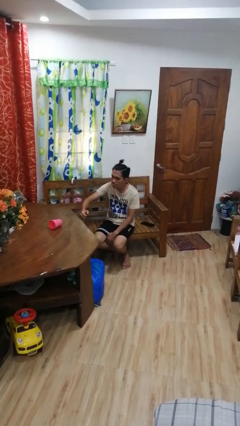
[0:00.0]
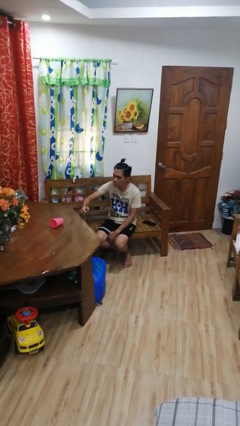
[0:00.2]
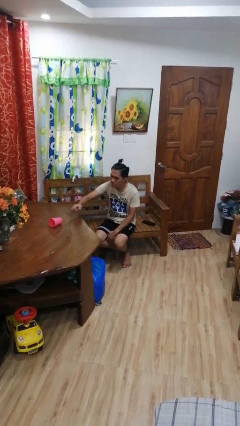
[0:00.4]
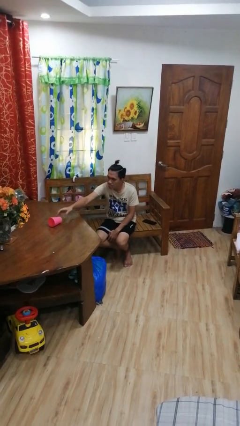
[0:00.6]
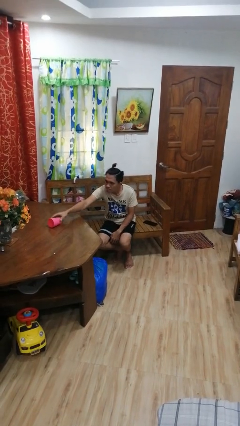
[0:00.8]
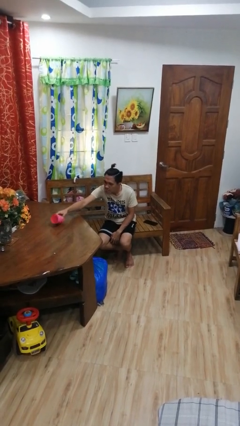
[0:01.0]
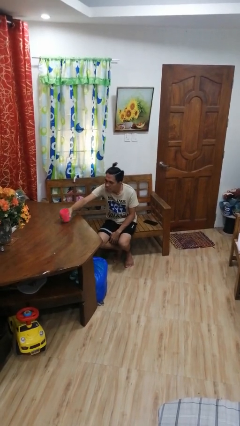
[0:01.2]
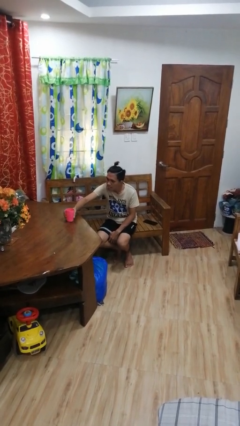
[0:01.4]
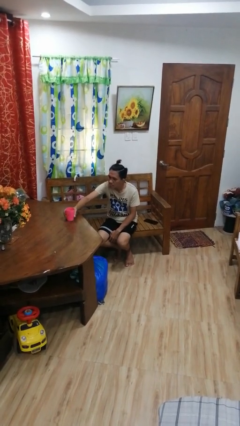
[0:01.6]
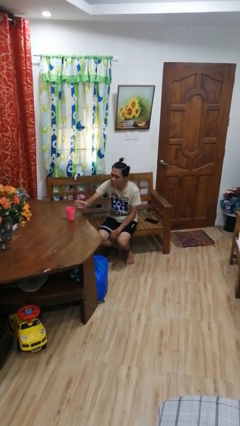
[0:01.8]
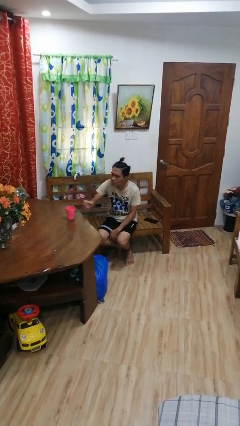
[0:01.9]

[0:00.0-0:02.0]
person sets upright glass

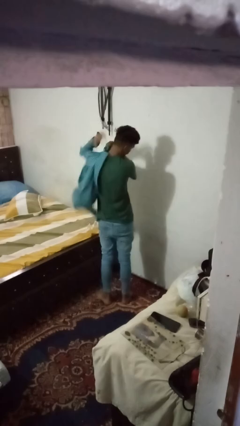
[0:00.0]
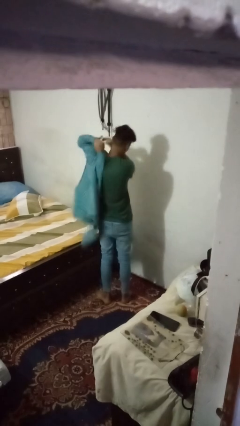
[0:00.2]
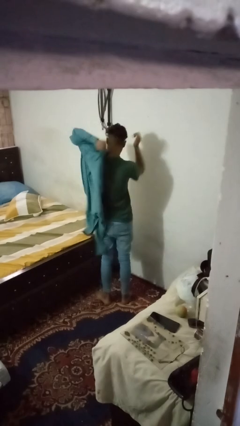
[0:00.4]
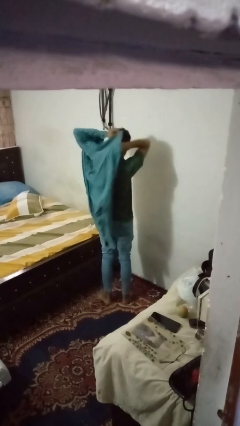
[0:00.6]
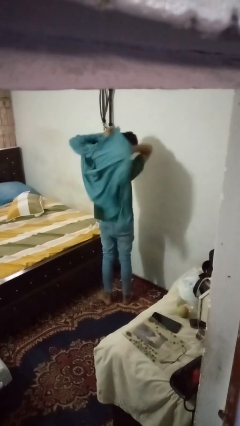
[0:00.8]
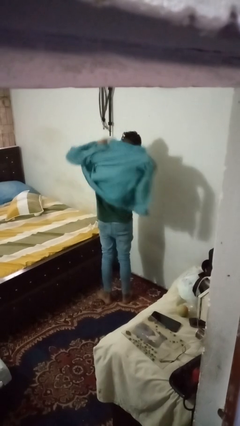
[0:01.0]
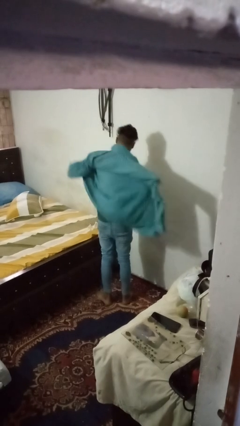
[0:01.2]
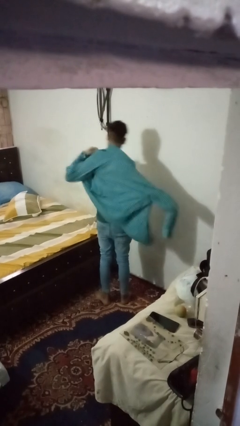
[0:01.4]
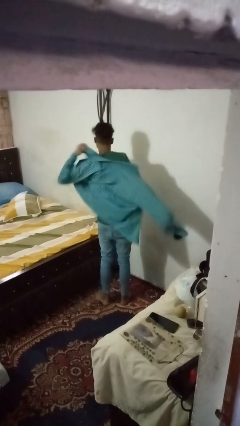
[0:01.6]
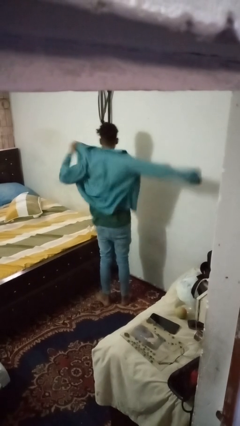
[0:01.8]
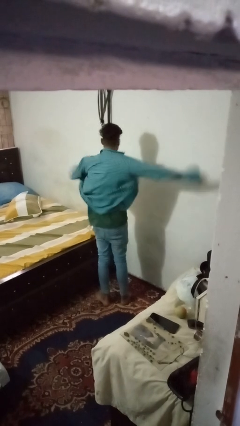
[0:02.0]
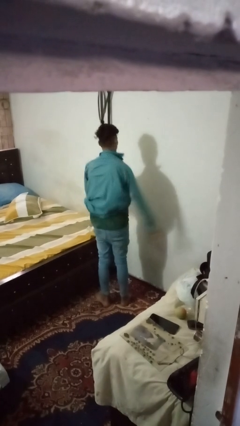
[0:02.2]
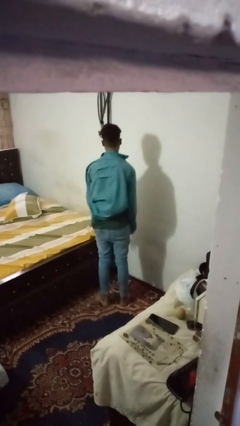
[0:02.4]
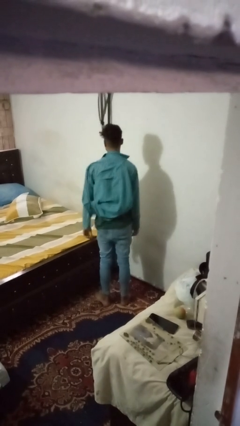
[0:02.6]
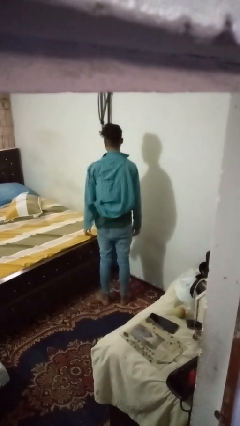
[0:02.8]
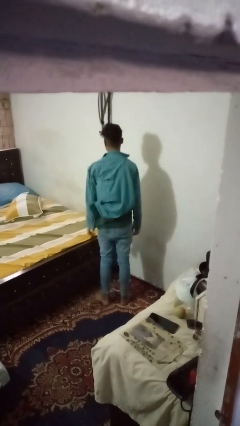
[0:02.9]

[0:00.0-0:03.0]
person puts on shirt

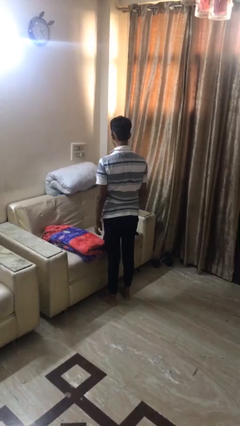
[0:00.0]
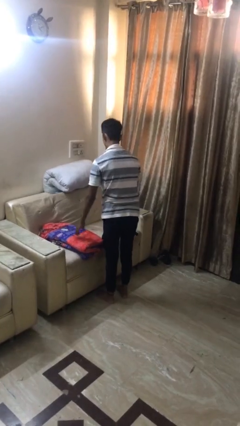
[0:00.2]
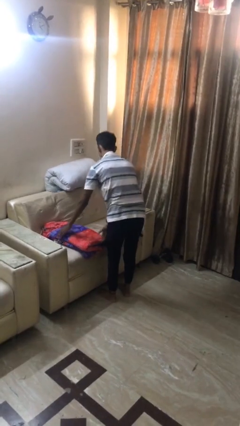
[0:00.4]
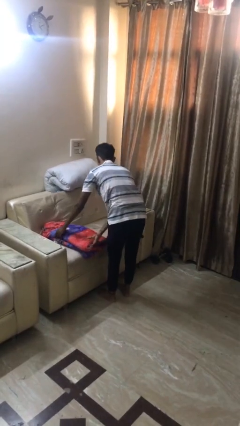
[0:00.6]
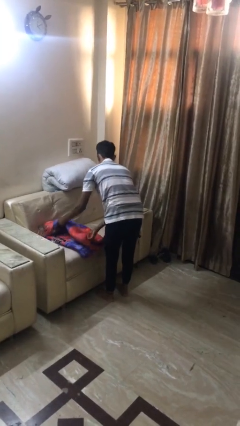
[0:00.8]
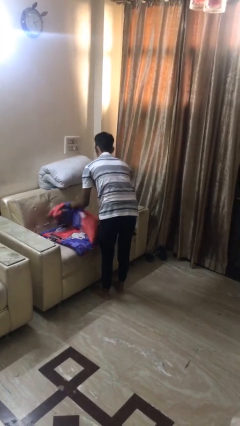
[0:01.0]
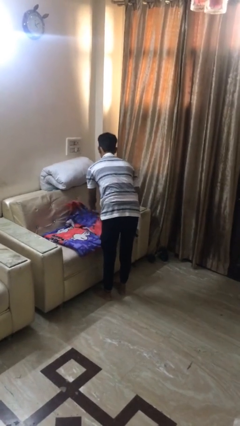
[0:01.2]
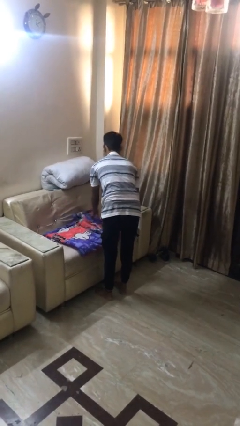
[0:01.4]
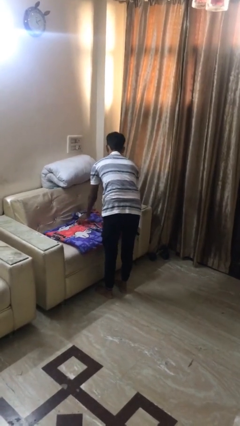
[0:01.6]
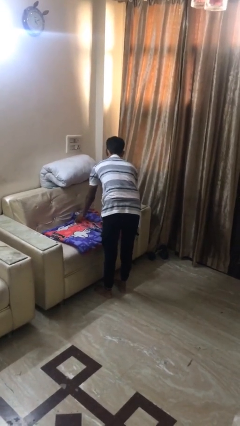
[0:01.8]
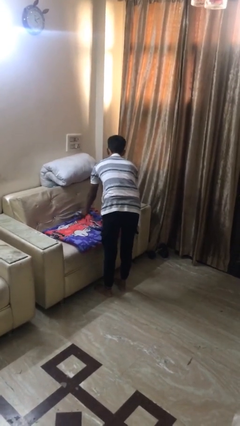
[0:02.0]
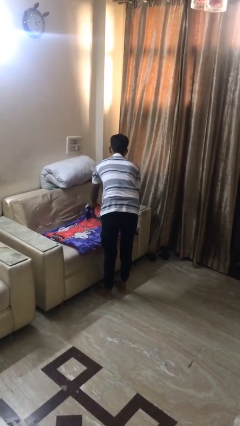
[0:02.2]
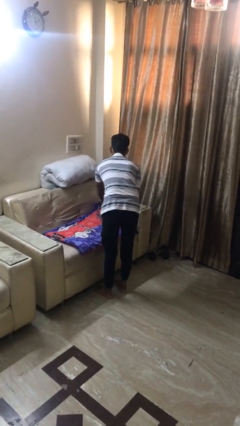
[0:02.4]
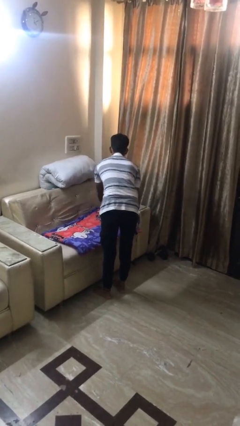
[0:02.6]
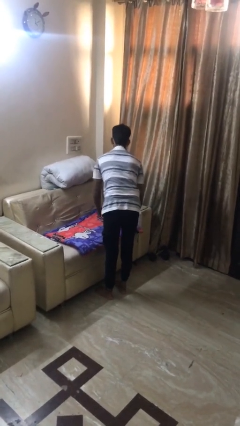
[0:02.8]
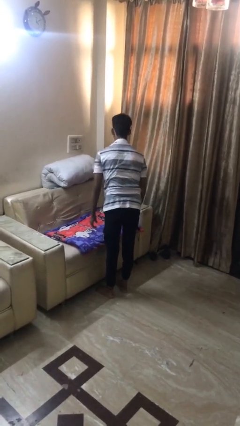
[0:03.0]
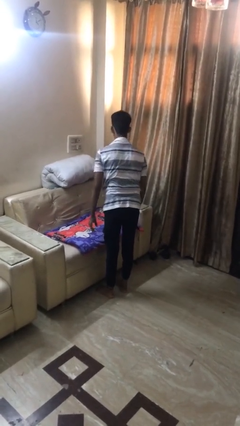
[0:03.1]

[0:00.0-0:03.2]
person unfolds blanket

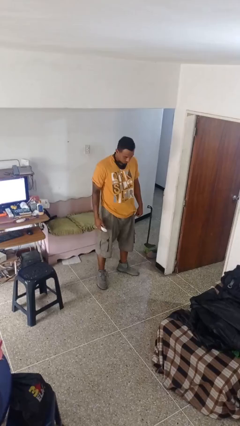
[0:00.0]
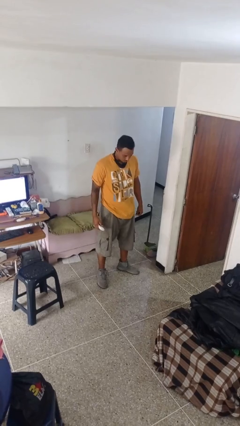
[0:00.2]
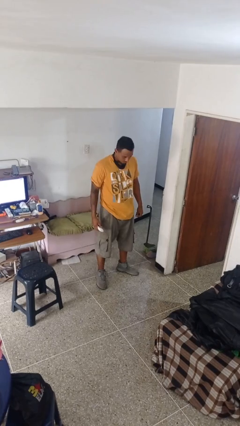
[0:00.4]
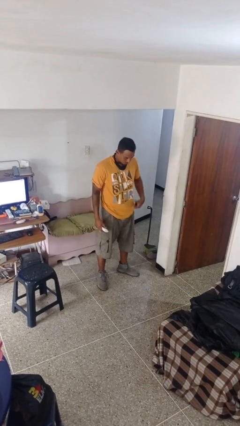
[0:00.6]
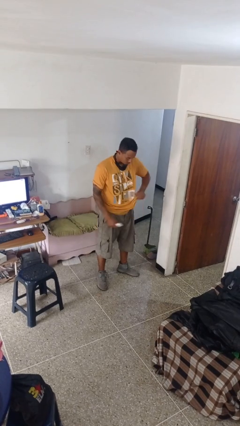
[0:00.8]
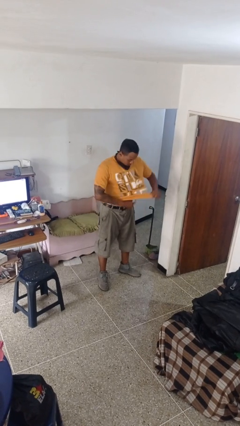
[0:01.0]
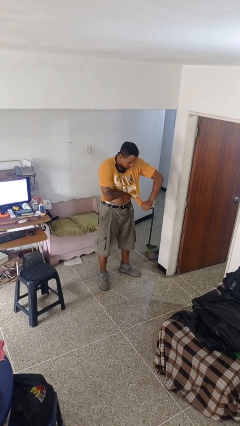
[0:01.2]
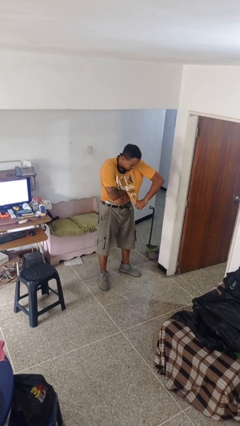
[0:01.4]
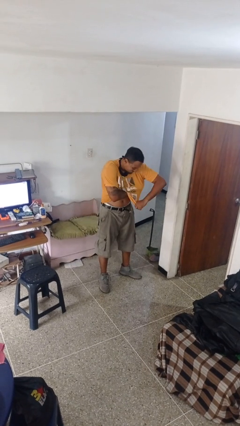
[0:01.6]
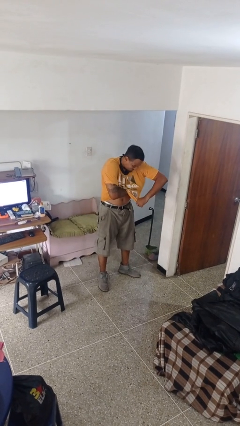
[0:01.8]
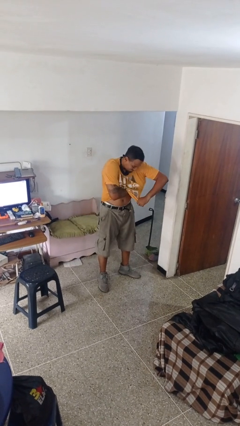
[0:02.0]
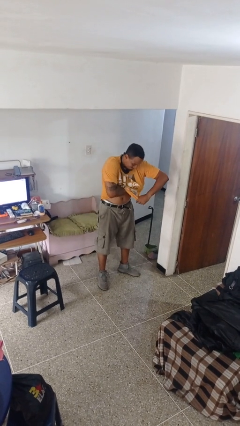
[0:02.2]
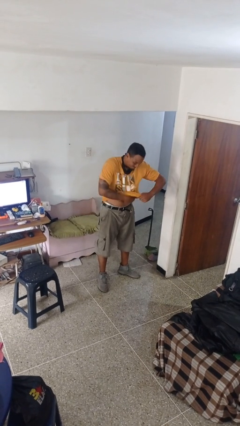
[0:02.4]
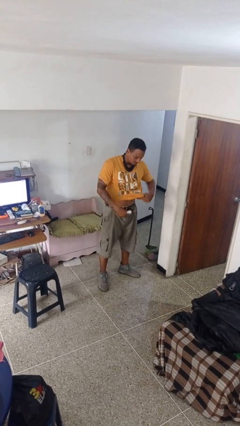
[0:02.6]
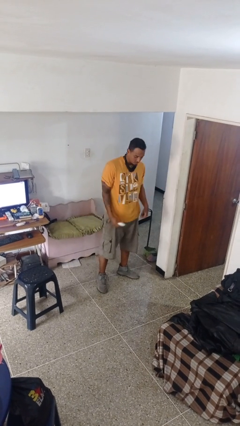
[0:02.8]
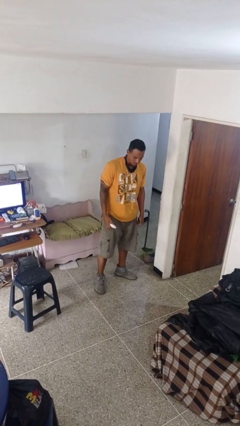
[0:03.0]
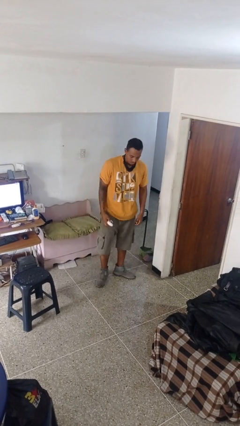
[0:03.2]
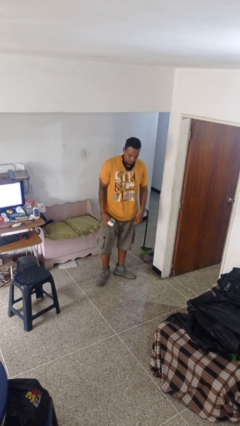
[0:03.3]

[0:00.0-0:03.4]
person applies deodorant

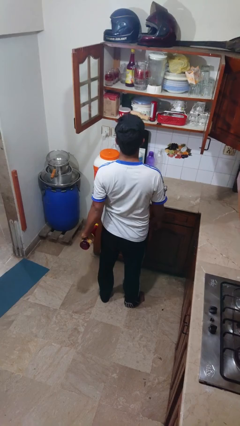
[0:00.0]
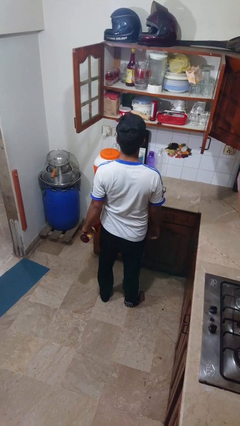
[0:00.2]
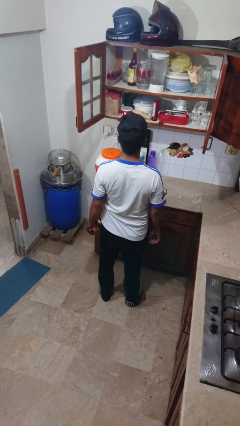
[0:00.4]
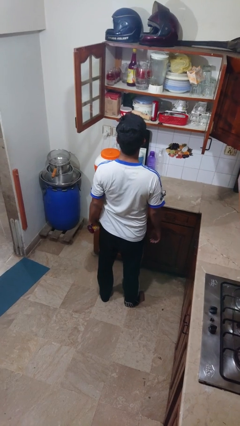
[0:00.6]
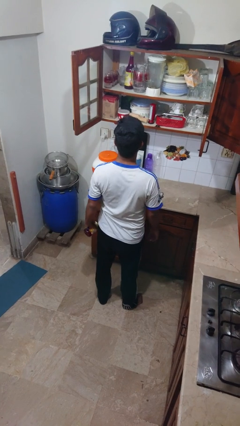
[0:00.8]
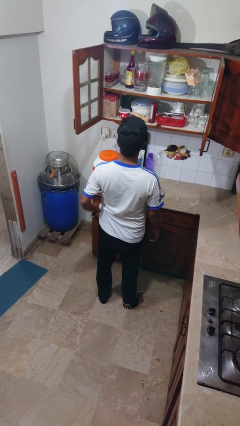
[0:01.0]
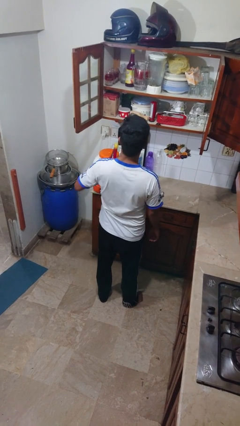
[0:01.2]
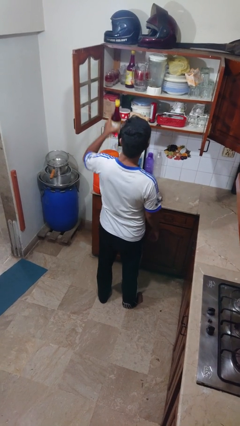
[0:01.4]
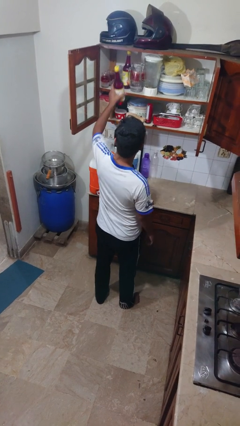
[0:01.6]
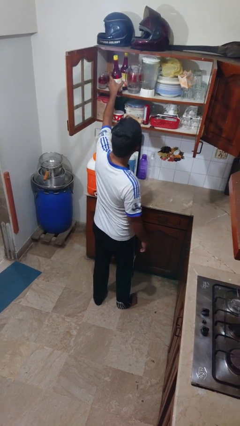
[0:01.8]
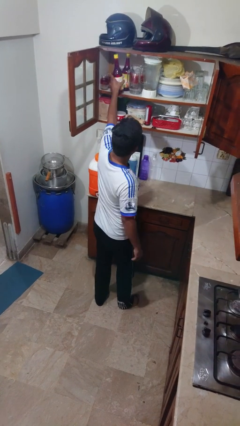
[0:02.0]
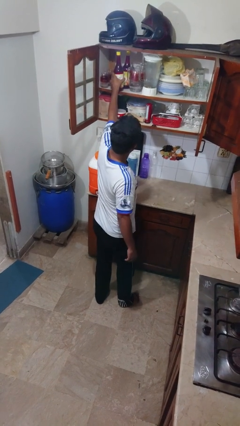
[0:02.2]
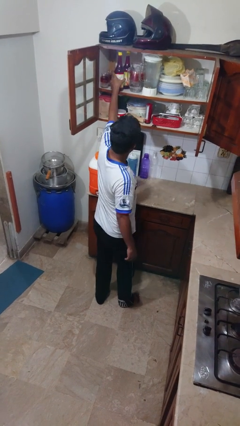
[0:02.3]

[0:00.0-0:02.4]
person puts down object into cabinet

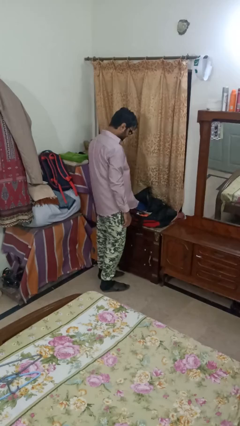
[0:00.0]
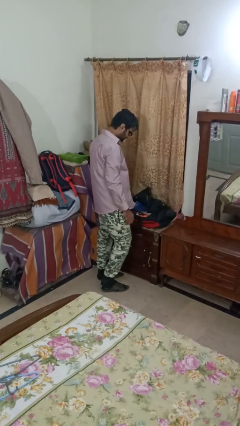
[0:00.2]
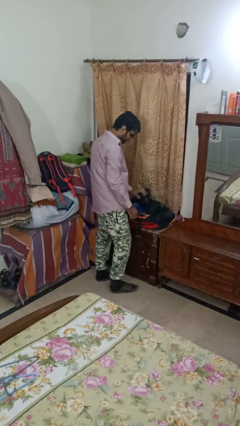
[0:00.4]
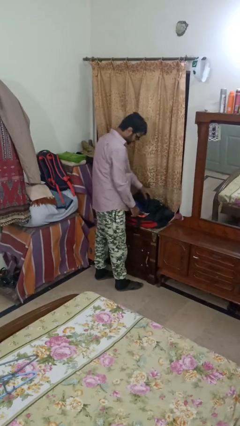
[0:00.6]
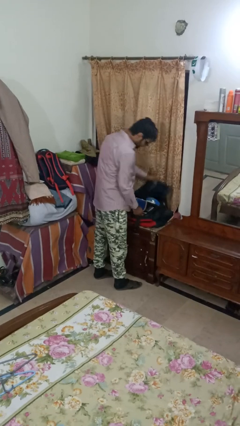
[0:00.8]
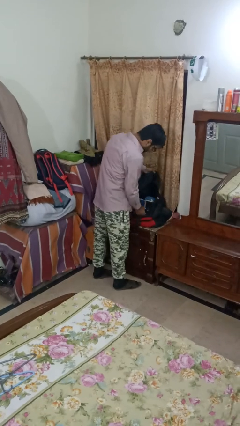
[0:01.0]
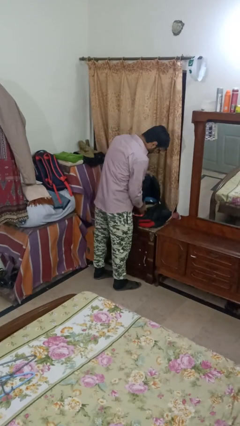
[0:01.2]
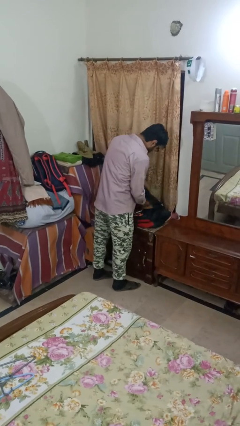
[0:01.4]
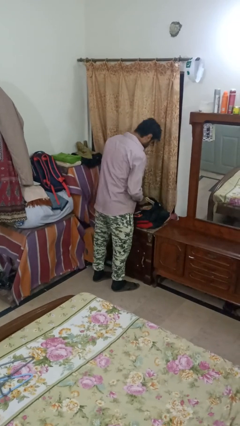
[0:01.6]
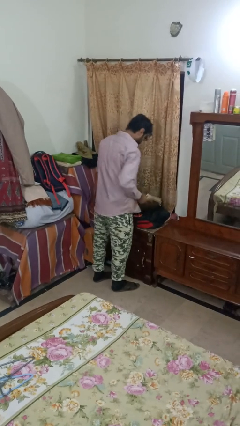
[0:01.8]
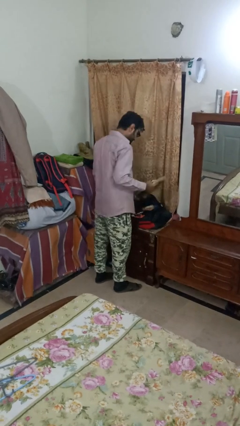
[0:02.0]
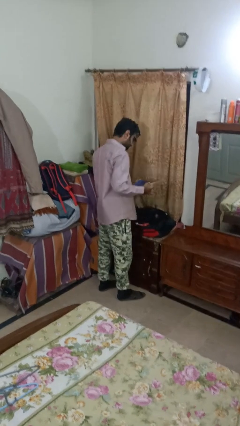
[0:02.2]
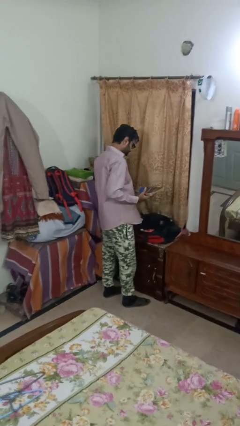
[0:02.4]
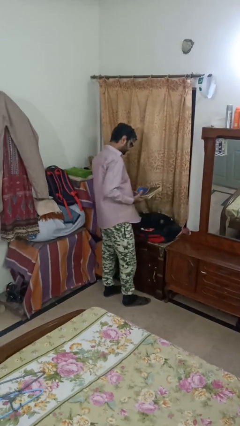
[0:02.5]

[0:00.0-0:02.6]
person takes object from bag

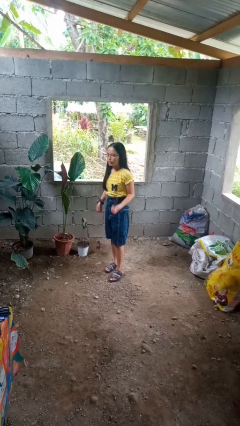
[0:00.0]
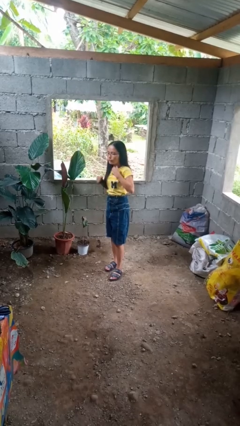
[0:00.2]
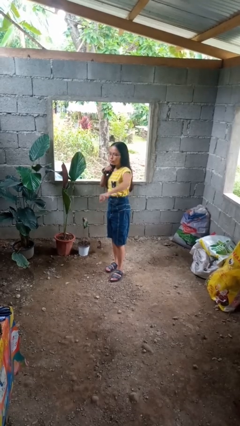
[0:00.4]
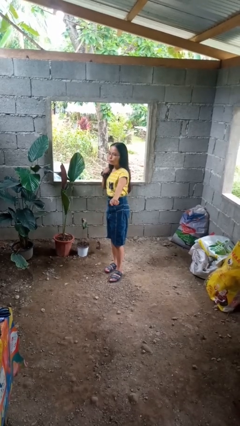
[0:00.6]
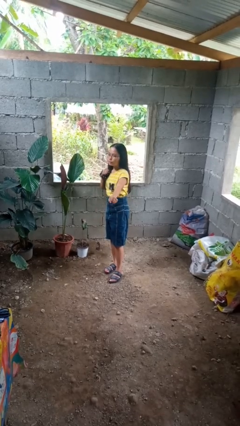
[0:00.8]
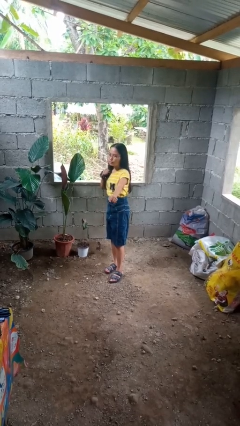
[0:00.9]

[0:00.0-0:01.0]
person karate chop
